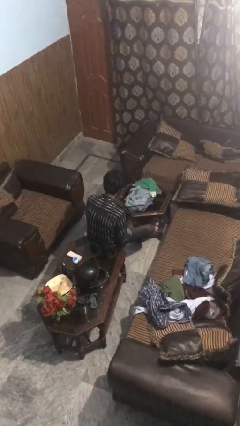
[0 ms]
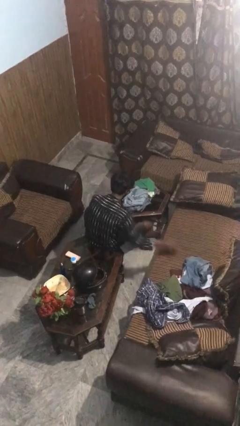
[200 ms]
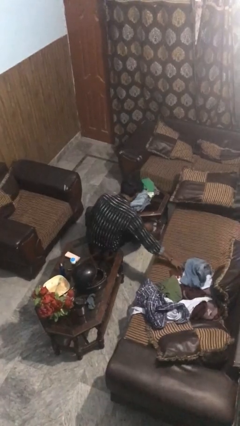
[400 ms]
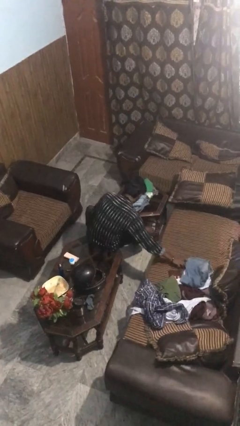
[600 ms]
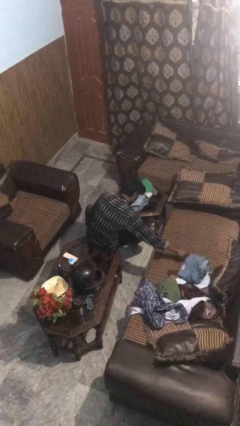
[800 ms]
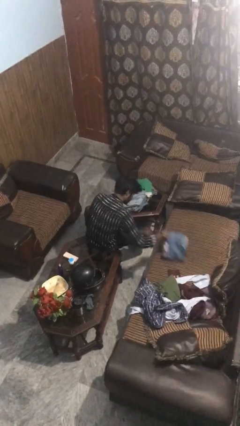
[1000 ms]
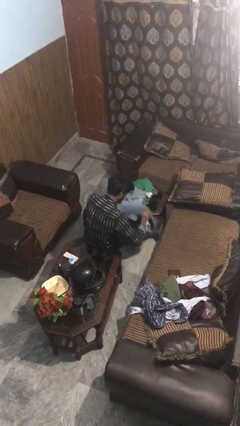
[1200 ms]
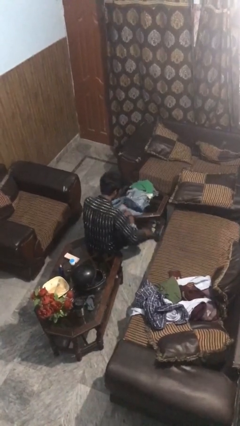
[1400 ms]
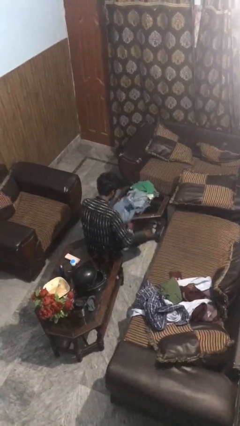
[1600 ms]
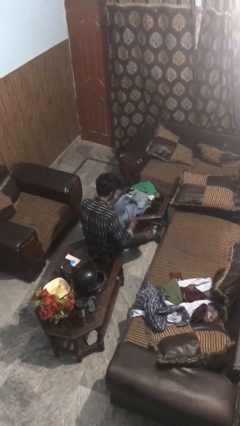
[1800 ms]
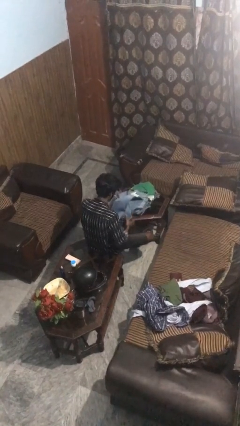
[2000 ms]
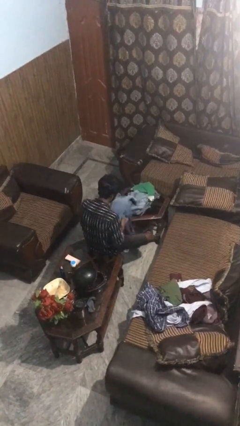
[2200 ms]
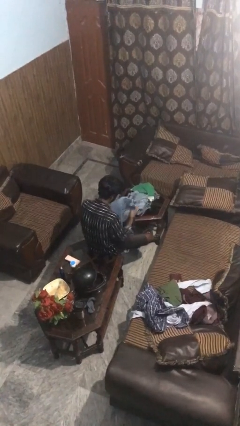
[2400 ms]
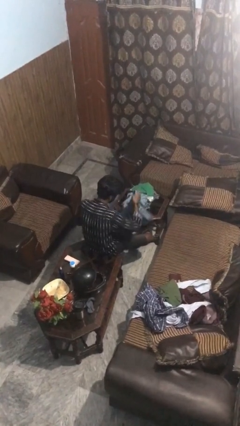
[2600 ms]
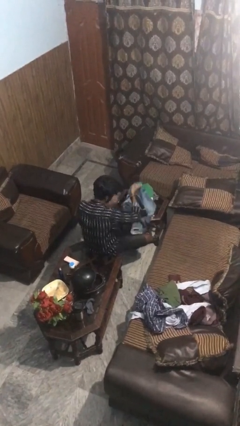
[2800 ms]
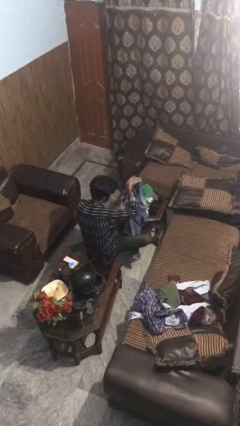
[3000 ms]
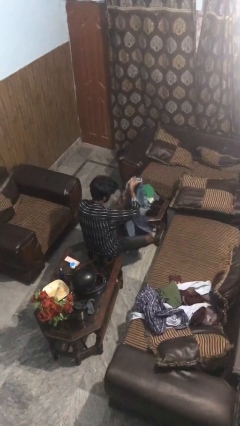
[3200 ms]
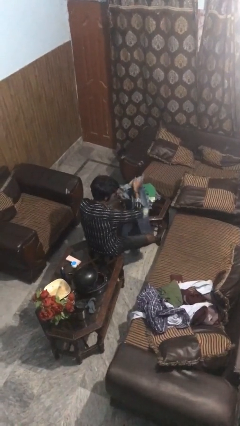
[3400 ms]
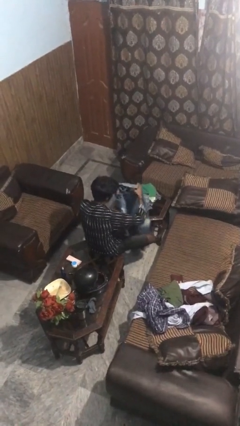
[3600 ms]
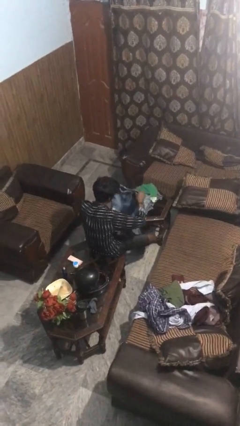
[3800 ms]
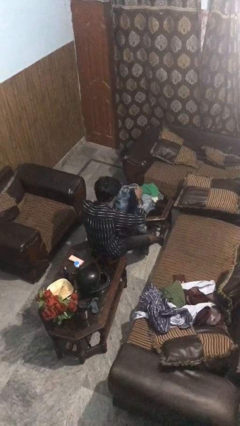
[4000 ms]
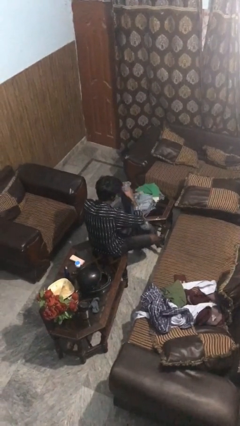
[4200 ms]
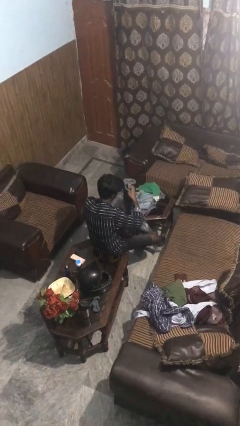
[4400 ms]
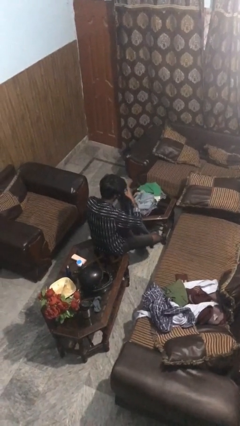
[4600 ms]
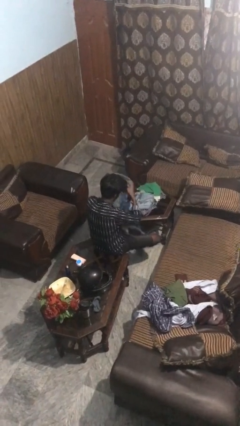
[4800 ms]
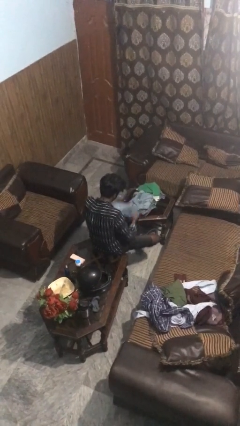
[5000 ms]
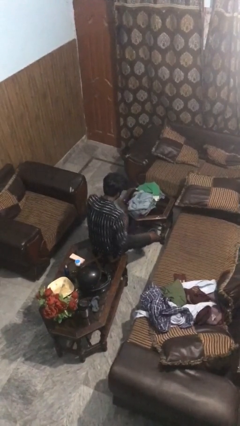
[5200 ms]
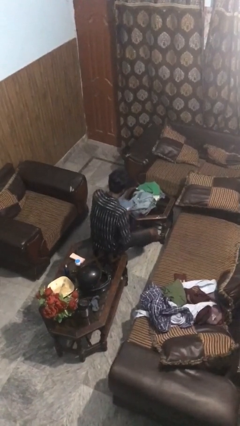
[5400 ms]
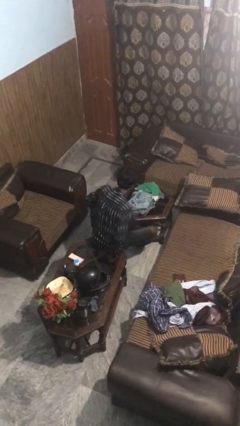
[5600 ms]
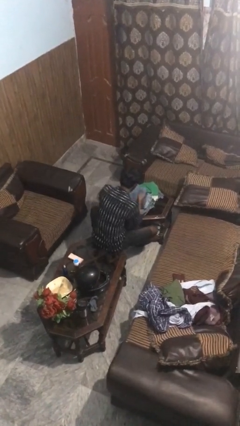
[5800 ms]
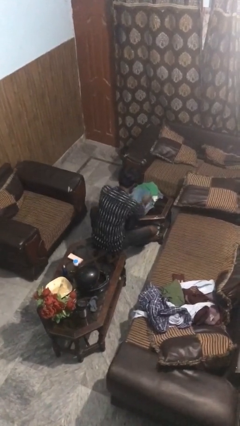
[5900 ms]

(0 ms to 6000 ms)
person folds pants

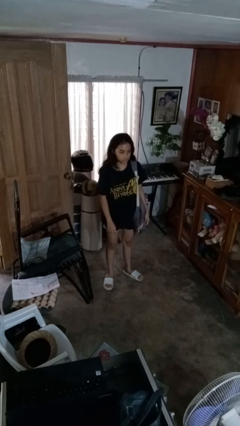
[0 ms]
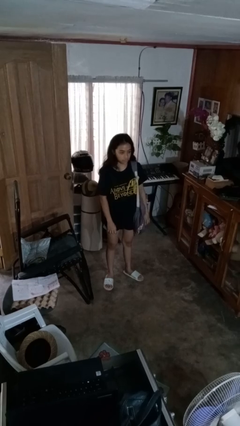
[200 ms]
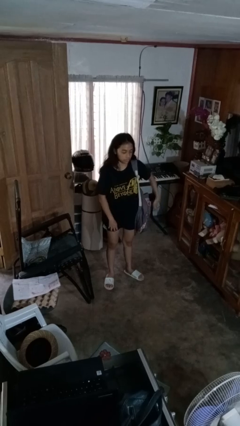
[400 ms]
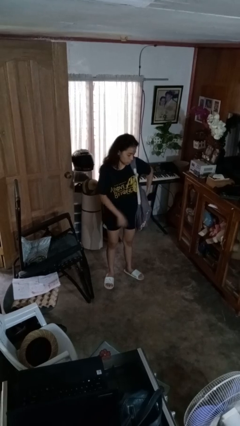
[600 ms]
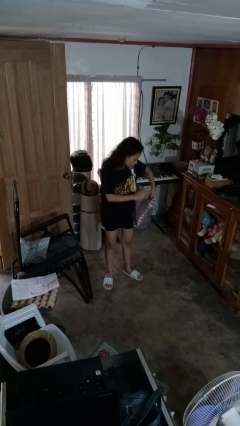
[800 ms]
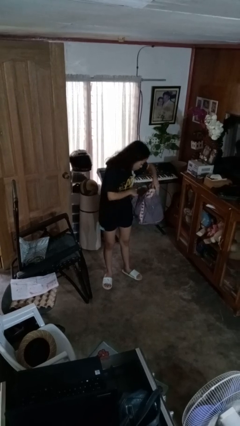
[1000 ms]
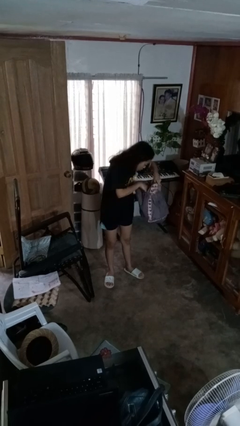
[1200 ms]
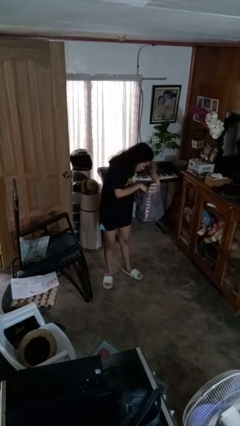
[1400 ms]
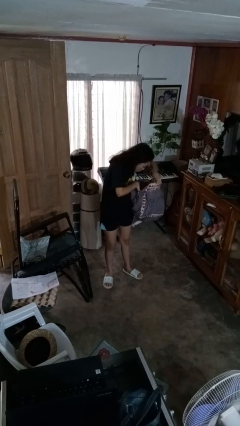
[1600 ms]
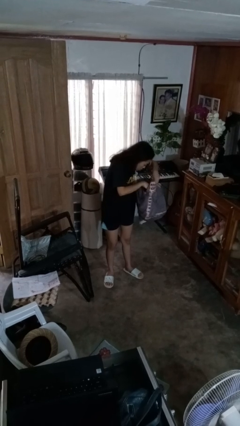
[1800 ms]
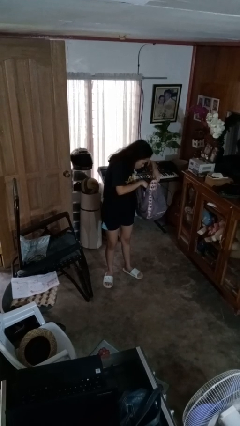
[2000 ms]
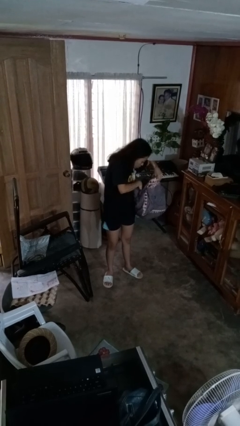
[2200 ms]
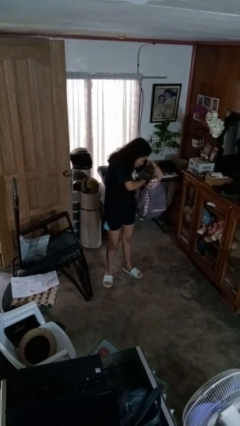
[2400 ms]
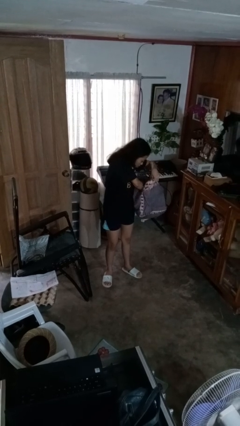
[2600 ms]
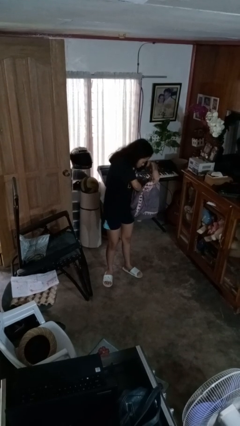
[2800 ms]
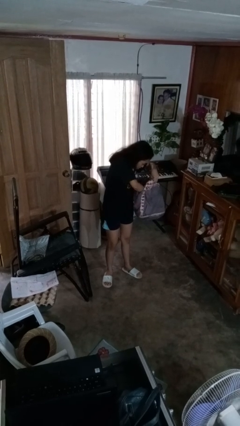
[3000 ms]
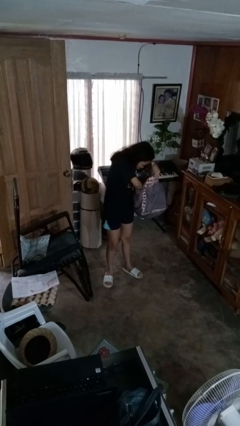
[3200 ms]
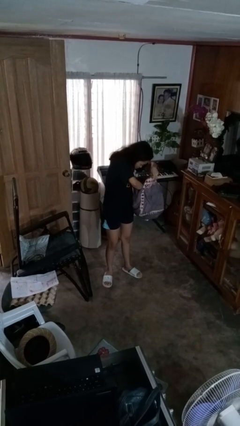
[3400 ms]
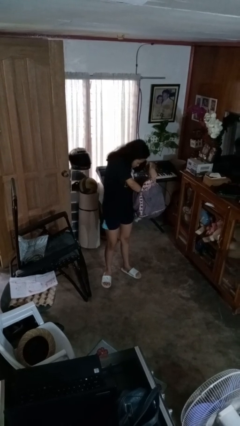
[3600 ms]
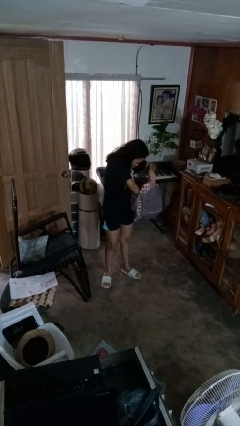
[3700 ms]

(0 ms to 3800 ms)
person searches in backpack

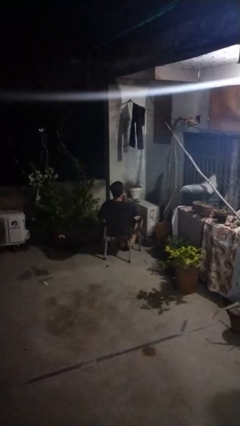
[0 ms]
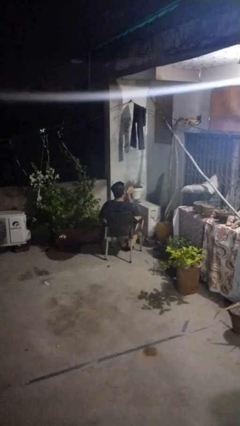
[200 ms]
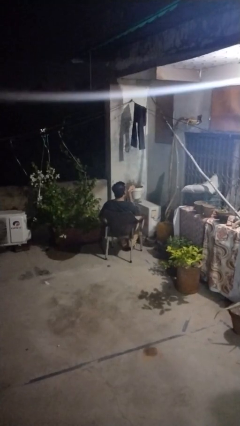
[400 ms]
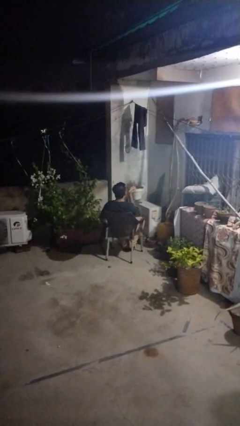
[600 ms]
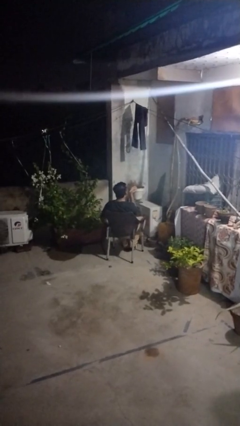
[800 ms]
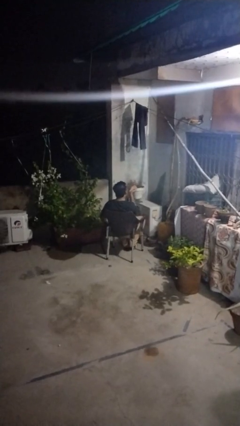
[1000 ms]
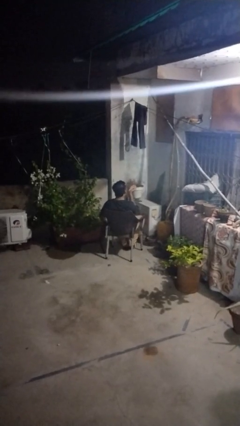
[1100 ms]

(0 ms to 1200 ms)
person gestures blow kiss

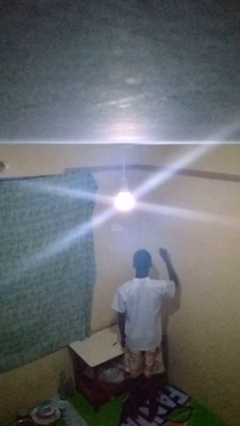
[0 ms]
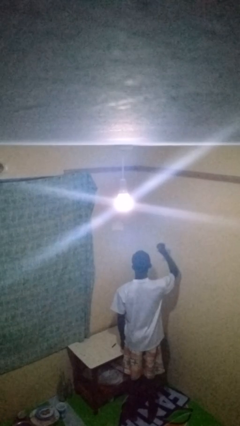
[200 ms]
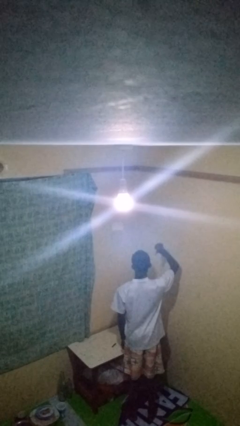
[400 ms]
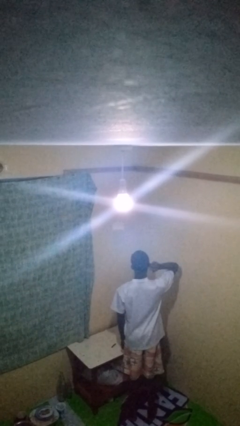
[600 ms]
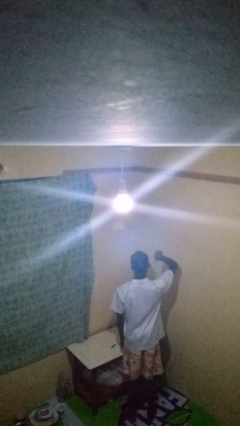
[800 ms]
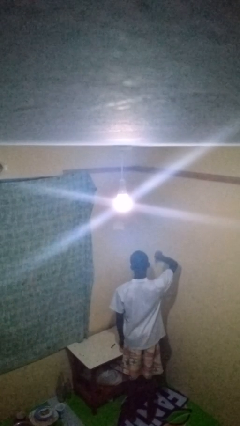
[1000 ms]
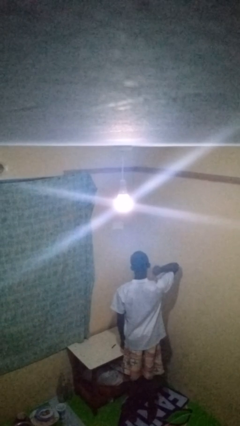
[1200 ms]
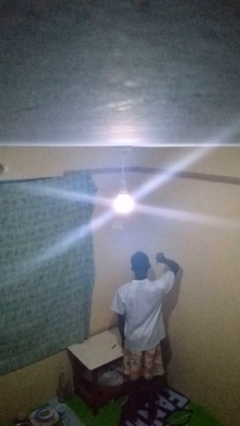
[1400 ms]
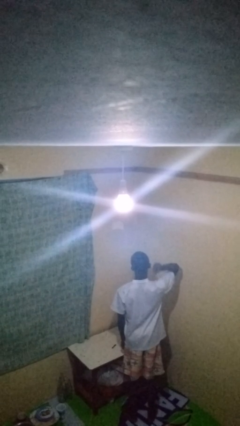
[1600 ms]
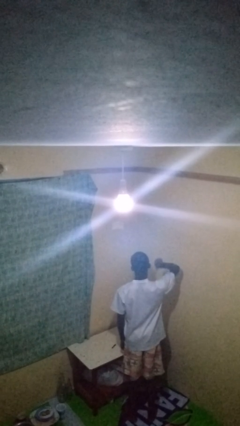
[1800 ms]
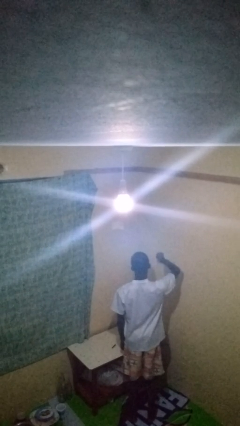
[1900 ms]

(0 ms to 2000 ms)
person gestures behind me

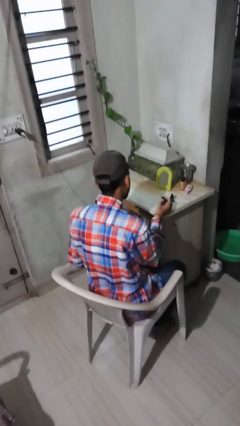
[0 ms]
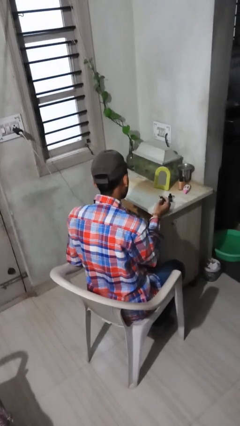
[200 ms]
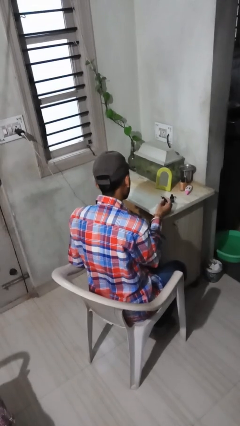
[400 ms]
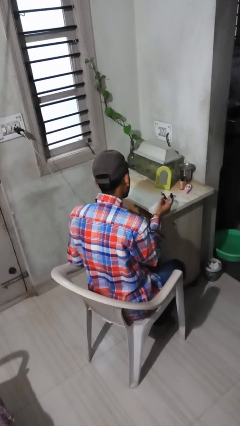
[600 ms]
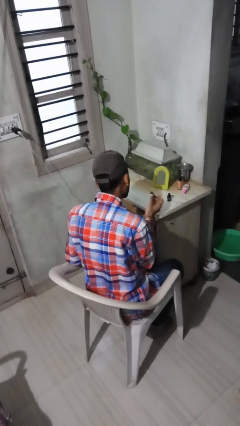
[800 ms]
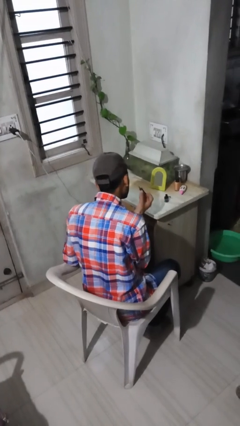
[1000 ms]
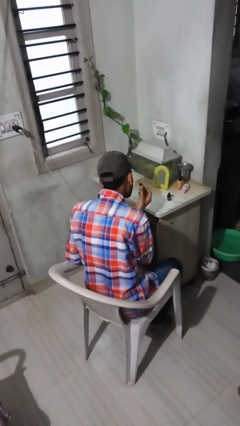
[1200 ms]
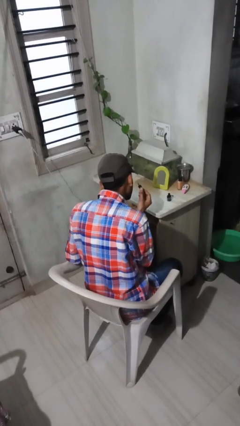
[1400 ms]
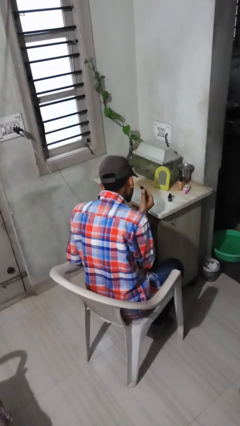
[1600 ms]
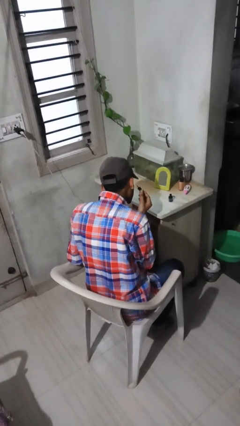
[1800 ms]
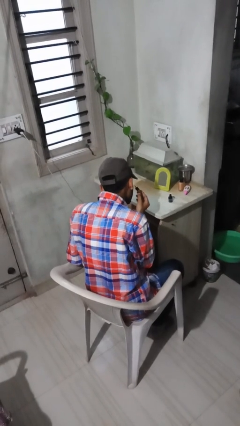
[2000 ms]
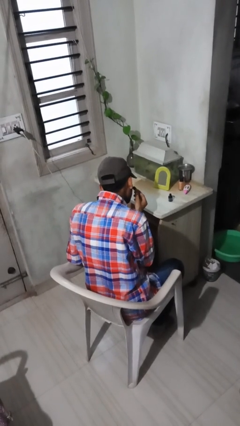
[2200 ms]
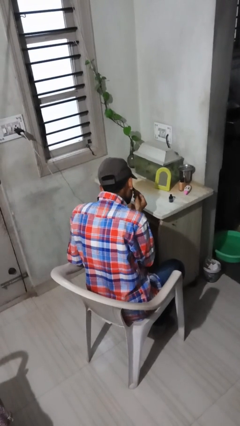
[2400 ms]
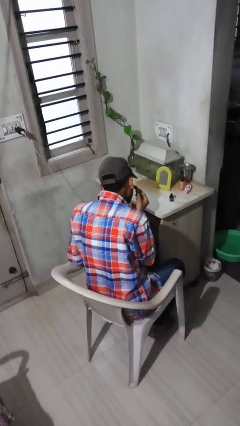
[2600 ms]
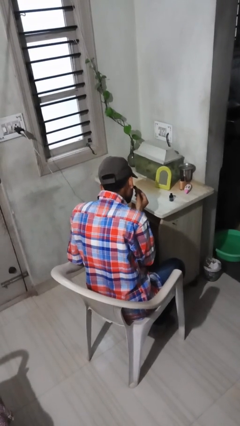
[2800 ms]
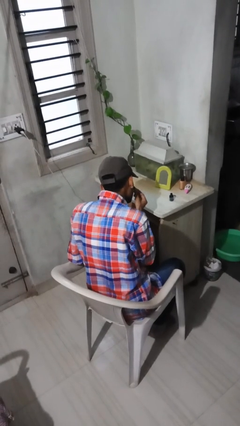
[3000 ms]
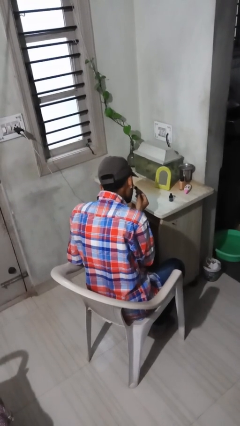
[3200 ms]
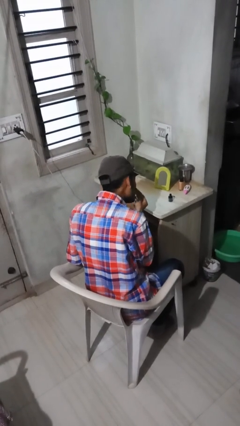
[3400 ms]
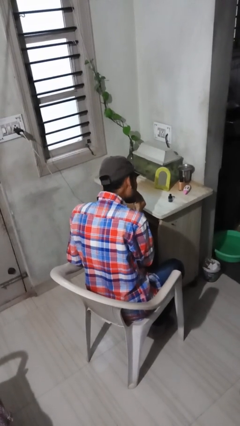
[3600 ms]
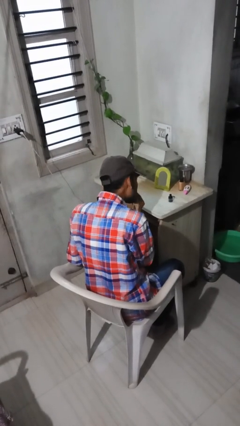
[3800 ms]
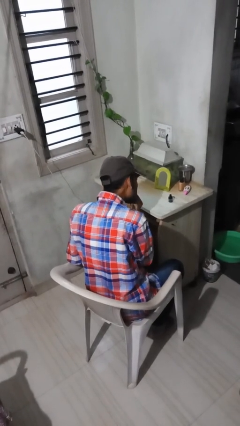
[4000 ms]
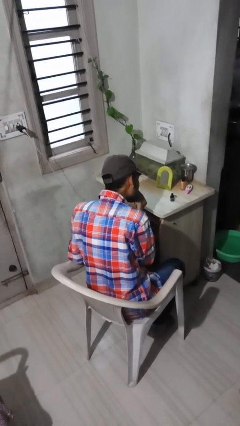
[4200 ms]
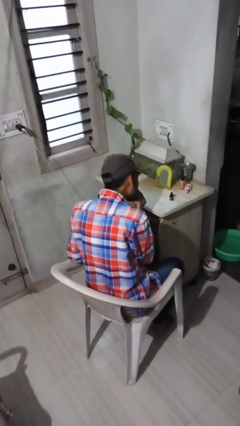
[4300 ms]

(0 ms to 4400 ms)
person applies eye makeup

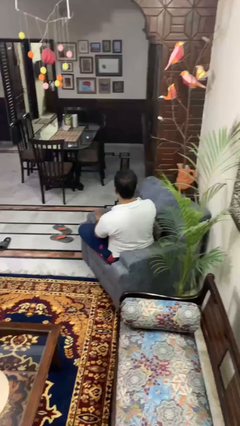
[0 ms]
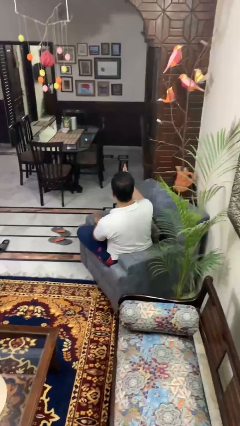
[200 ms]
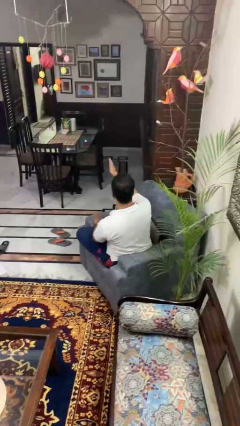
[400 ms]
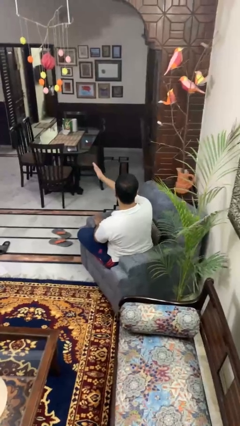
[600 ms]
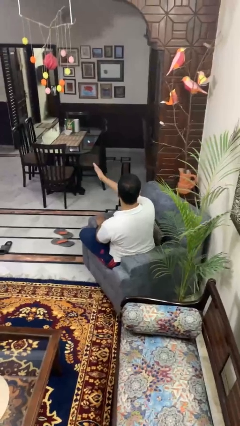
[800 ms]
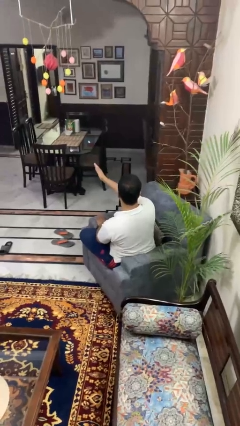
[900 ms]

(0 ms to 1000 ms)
person gestures swipe left
